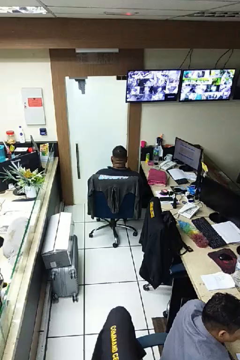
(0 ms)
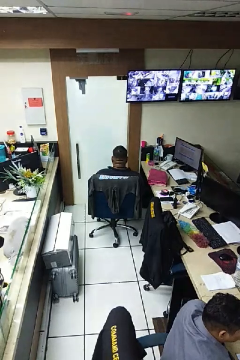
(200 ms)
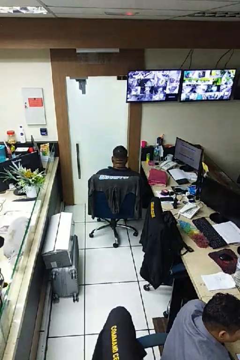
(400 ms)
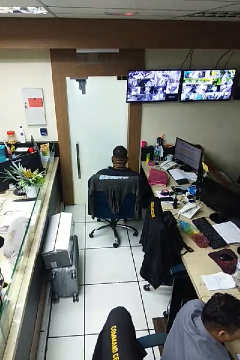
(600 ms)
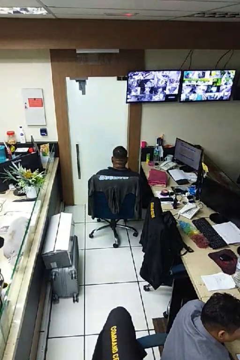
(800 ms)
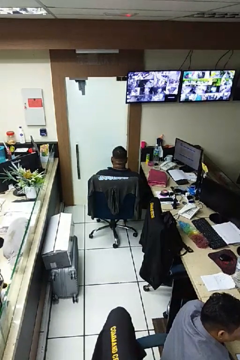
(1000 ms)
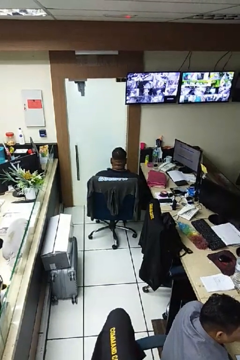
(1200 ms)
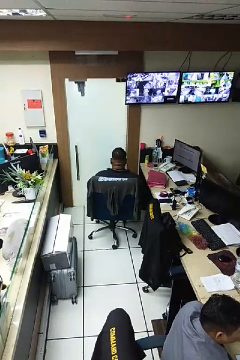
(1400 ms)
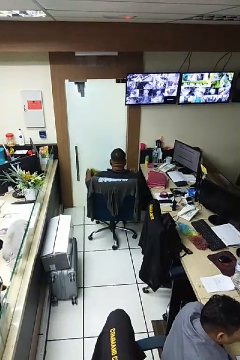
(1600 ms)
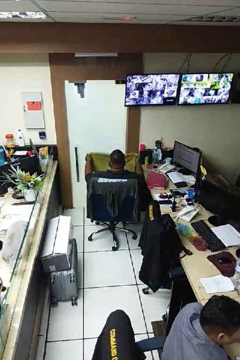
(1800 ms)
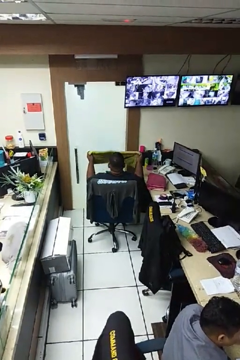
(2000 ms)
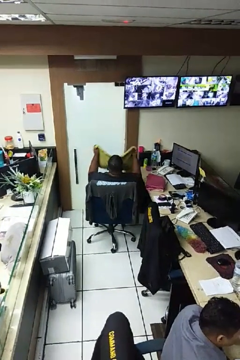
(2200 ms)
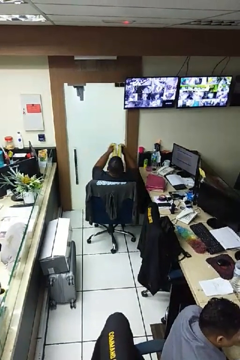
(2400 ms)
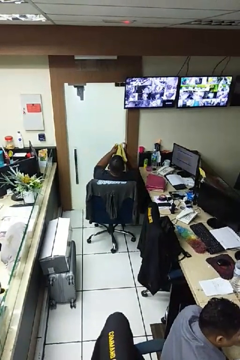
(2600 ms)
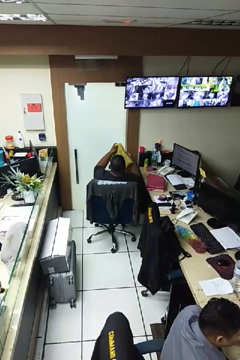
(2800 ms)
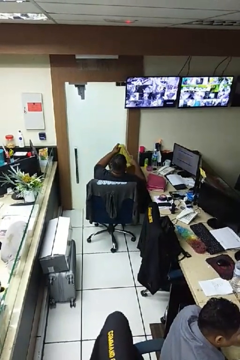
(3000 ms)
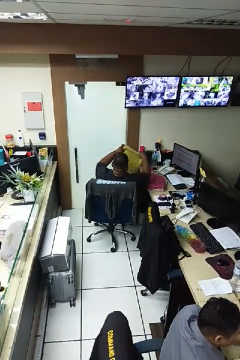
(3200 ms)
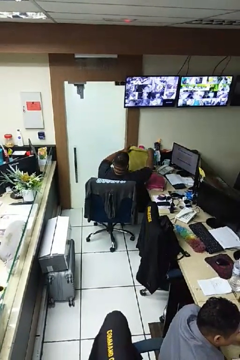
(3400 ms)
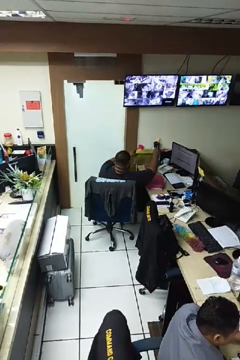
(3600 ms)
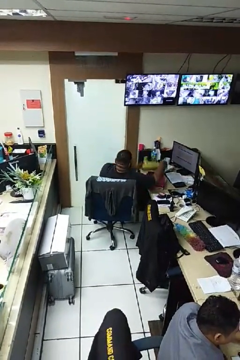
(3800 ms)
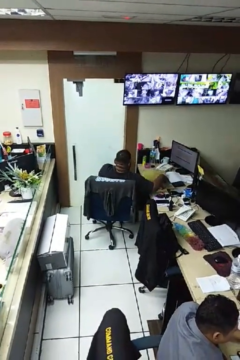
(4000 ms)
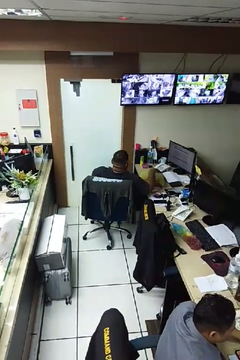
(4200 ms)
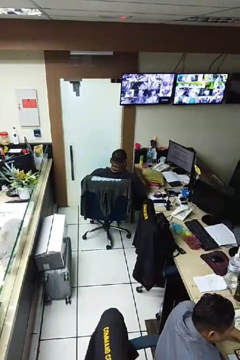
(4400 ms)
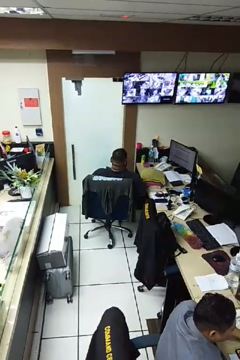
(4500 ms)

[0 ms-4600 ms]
person folds towel

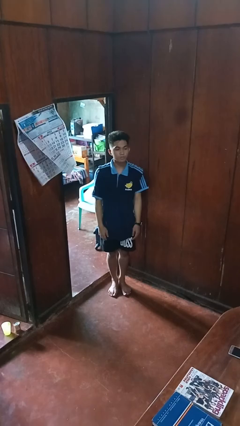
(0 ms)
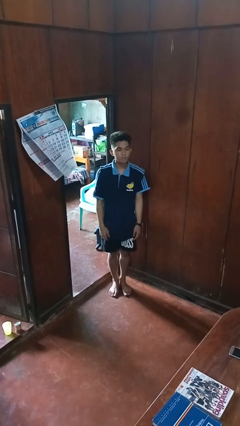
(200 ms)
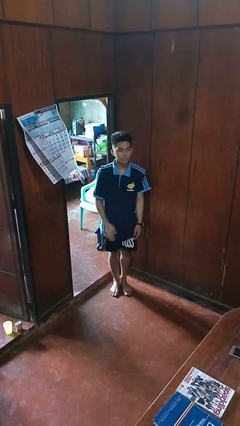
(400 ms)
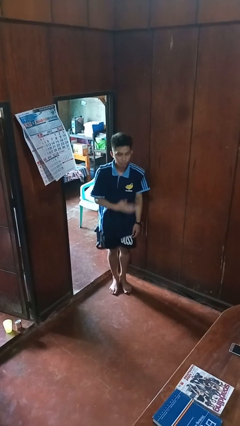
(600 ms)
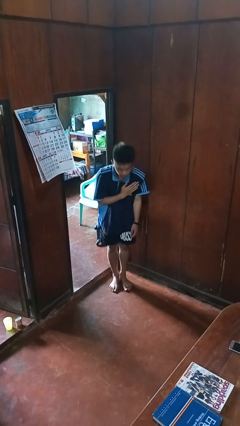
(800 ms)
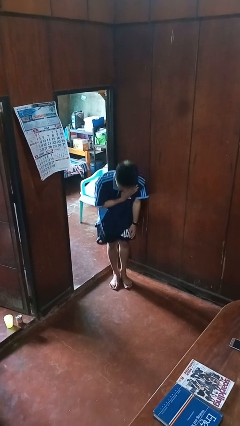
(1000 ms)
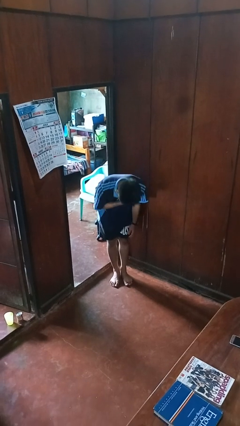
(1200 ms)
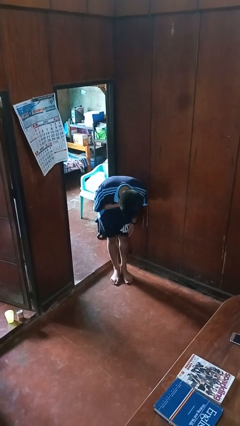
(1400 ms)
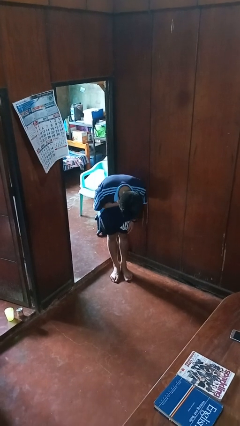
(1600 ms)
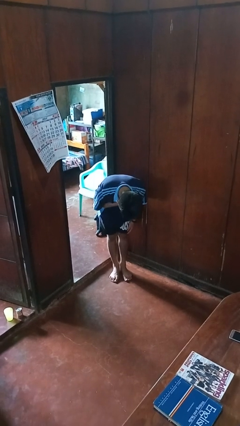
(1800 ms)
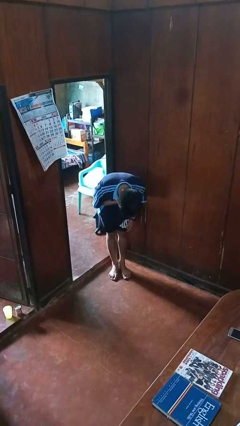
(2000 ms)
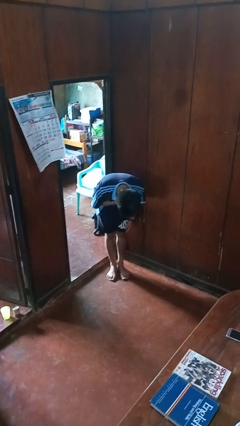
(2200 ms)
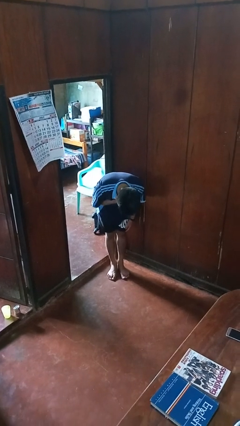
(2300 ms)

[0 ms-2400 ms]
person bows

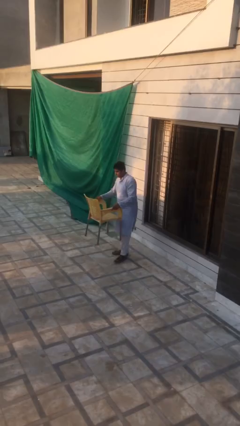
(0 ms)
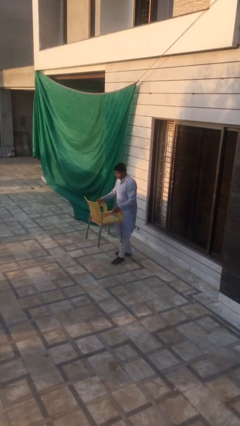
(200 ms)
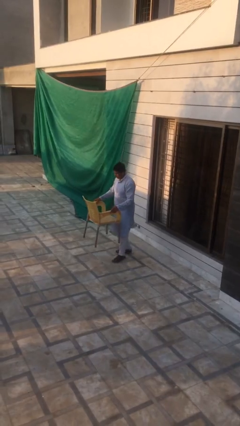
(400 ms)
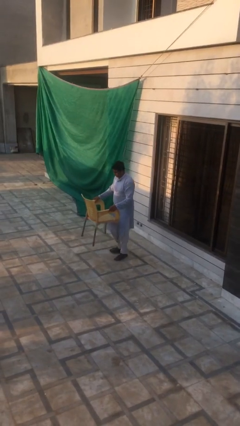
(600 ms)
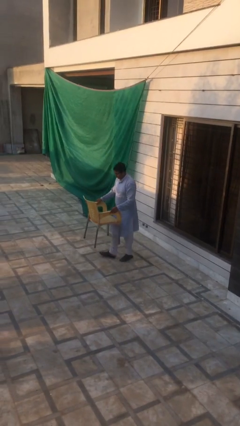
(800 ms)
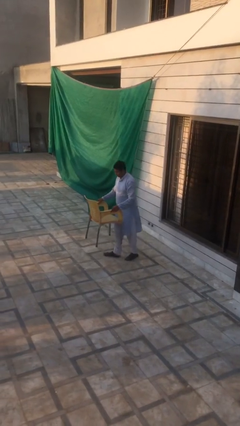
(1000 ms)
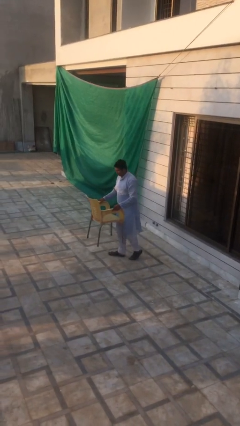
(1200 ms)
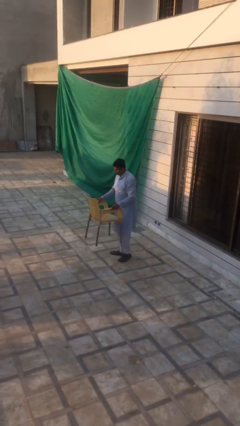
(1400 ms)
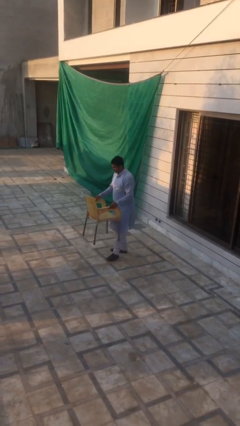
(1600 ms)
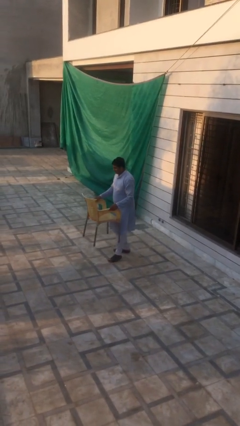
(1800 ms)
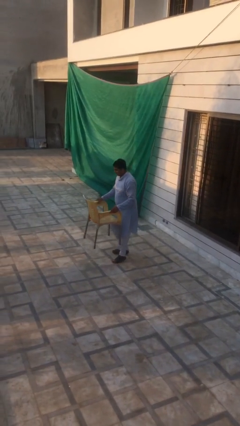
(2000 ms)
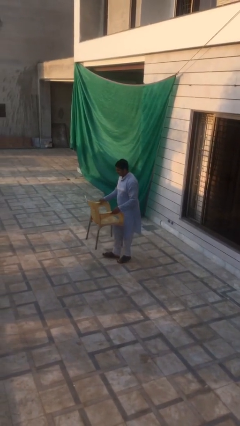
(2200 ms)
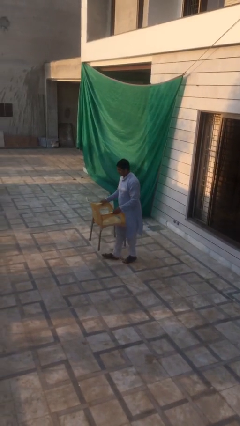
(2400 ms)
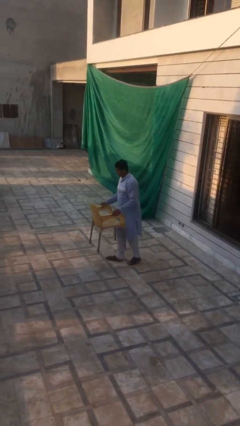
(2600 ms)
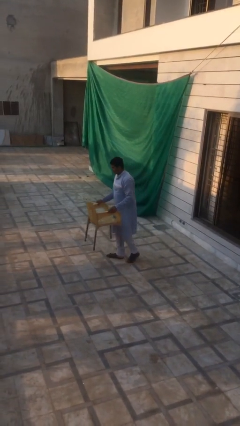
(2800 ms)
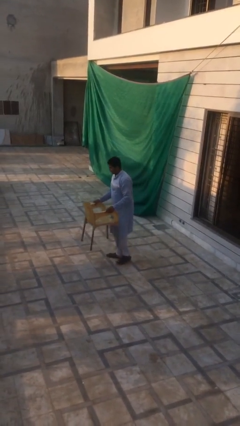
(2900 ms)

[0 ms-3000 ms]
person carries heavy object

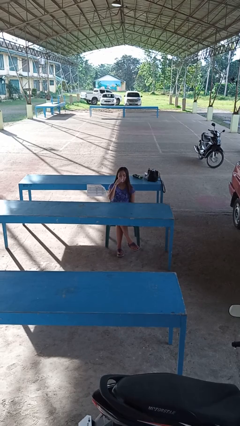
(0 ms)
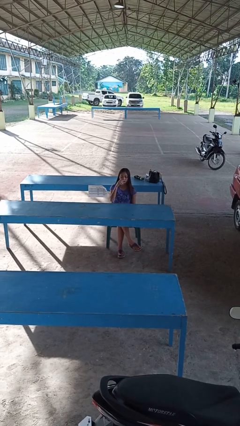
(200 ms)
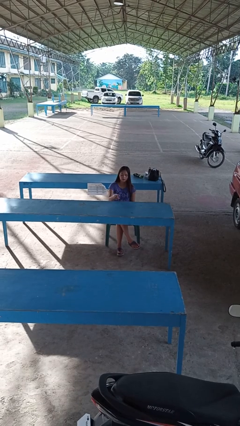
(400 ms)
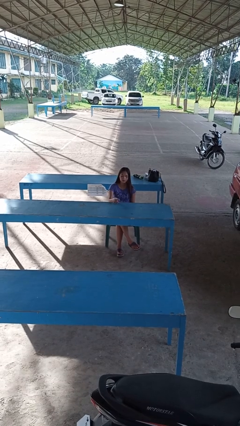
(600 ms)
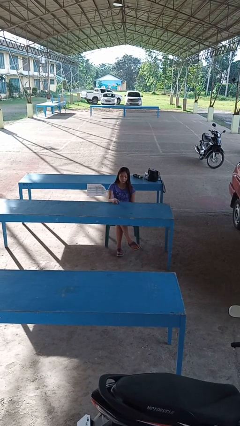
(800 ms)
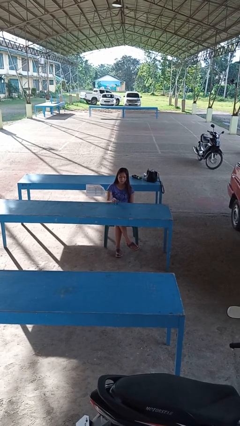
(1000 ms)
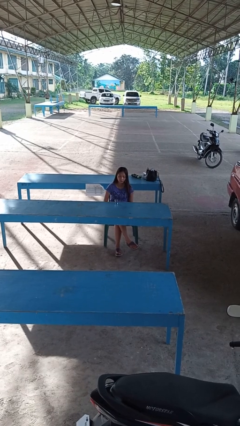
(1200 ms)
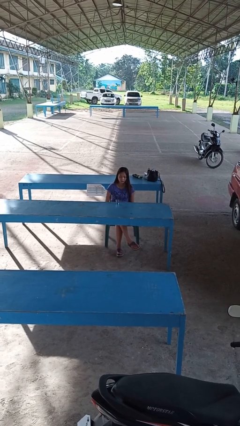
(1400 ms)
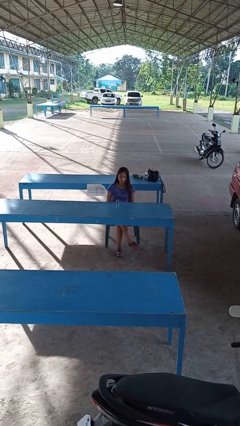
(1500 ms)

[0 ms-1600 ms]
person puts down object on table

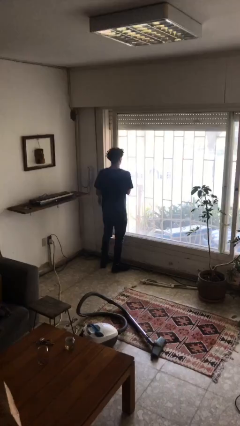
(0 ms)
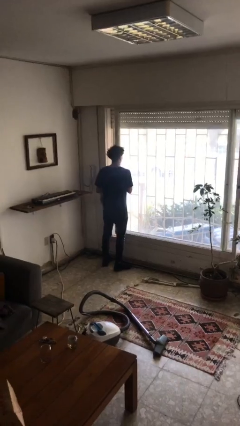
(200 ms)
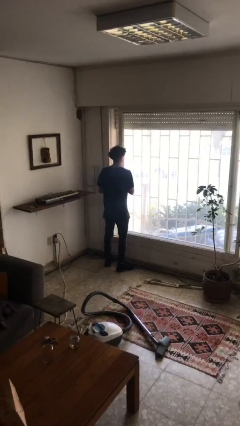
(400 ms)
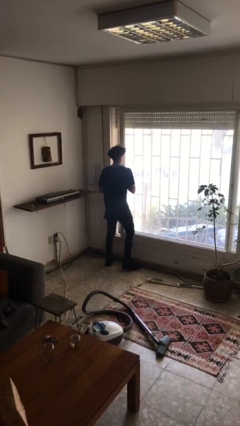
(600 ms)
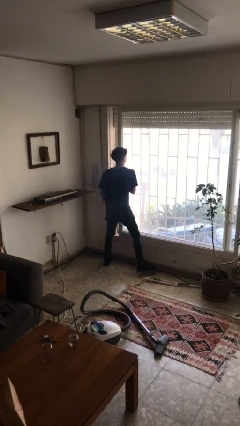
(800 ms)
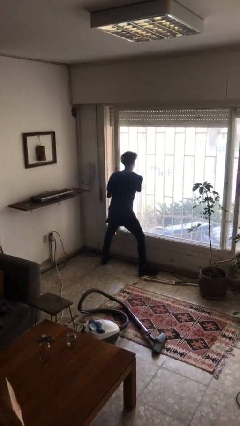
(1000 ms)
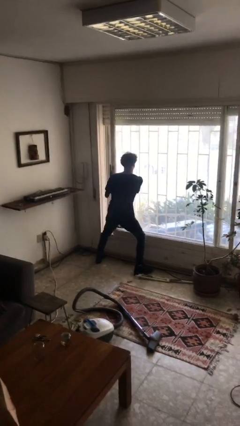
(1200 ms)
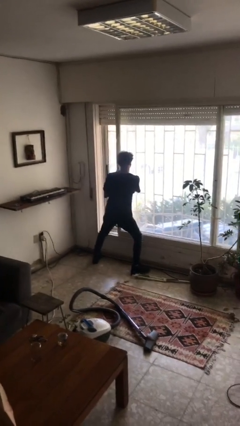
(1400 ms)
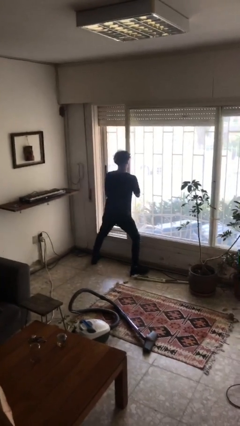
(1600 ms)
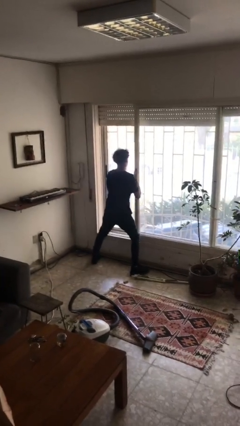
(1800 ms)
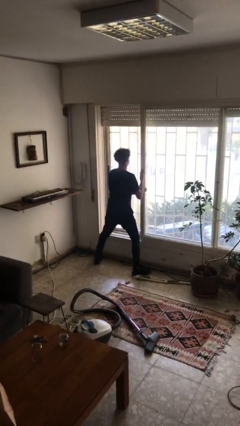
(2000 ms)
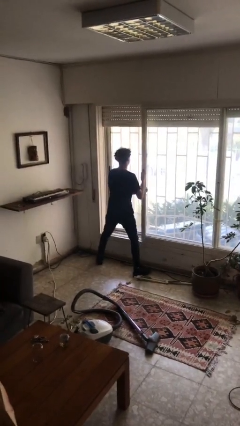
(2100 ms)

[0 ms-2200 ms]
person opens sliding door

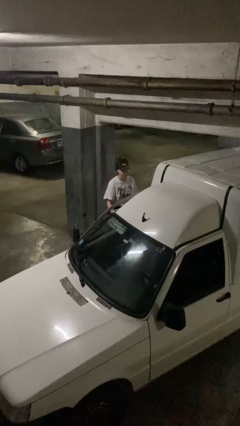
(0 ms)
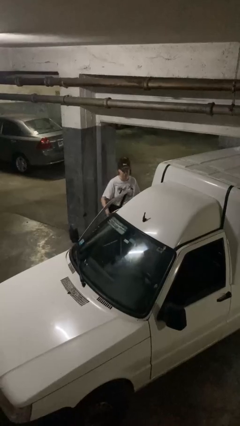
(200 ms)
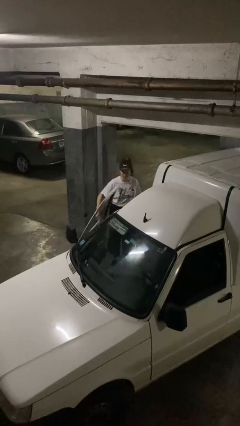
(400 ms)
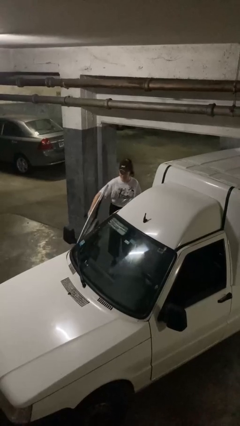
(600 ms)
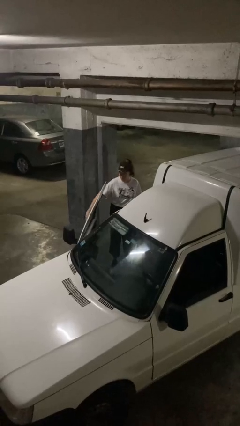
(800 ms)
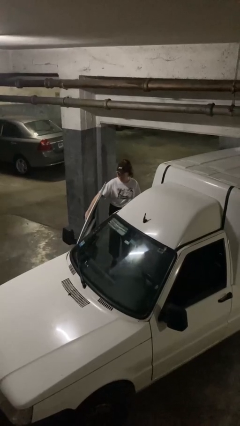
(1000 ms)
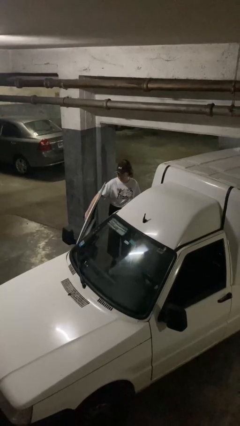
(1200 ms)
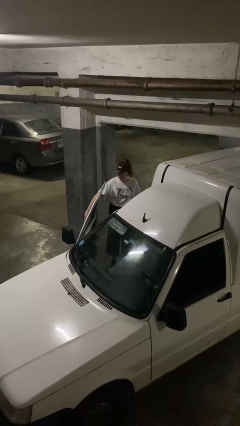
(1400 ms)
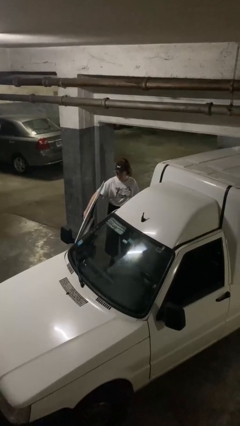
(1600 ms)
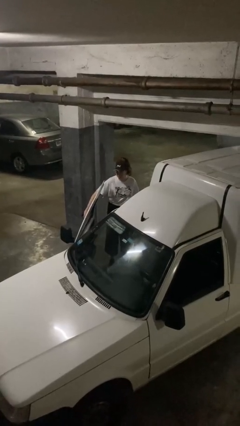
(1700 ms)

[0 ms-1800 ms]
person opens car door

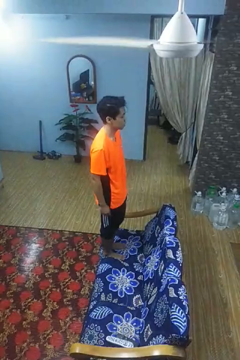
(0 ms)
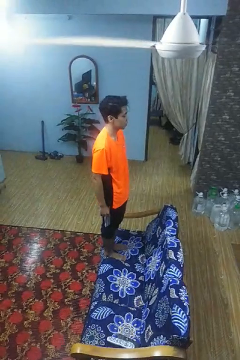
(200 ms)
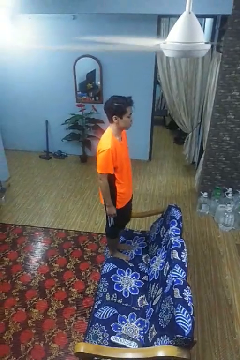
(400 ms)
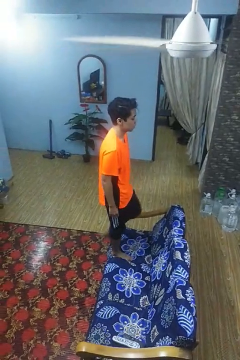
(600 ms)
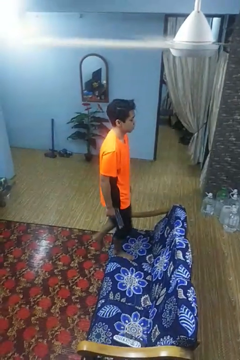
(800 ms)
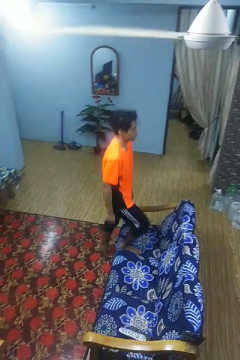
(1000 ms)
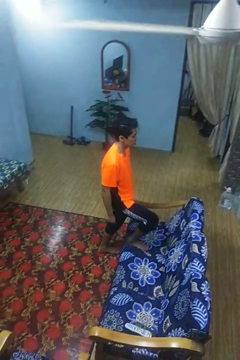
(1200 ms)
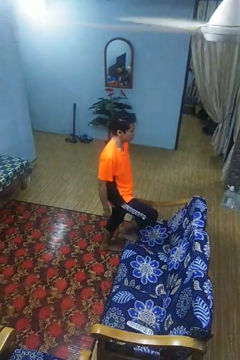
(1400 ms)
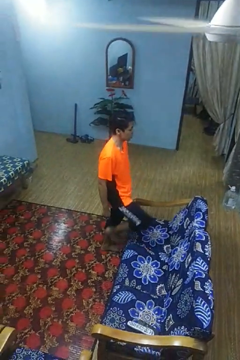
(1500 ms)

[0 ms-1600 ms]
person climbs off couch

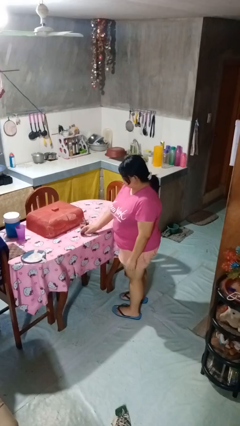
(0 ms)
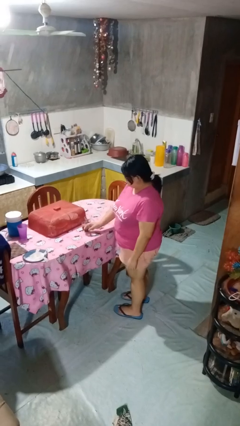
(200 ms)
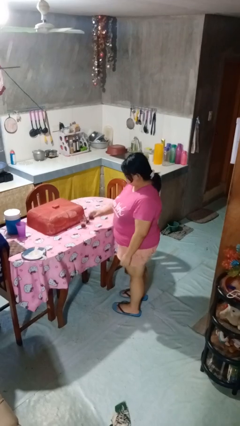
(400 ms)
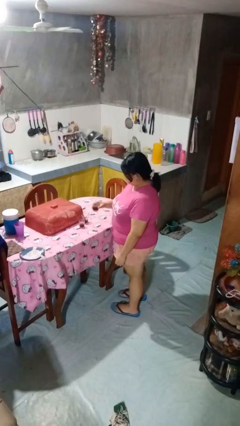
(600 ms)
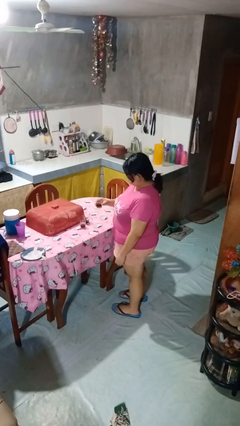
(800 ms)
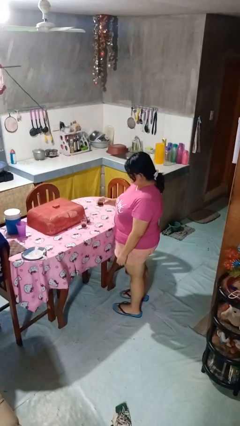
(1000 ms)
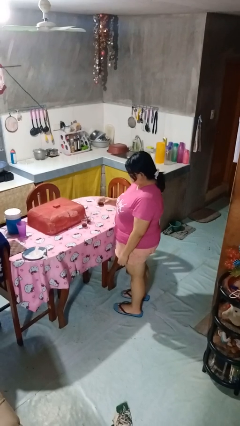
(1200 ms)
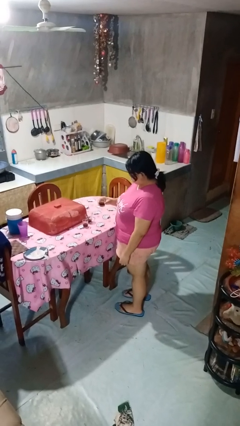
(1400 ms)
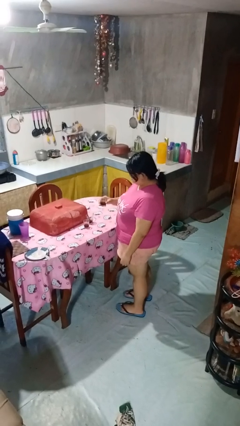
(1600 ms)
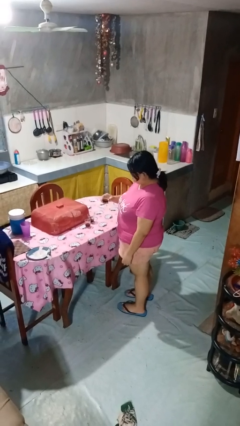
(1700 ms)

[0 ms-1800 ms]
person picks up object from table
